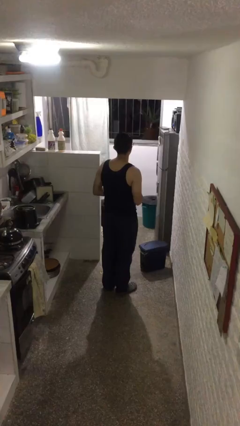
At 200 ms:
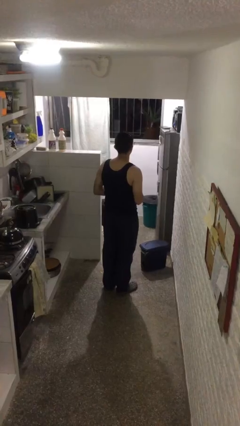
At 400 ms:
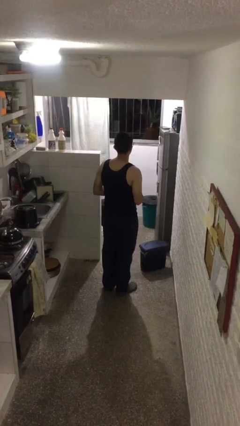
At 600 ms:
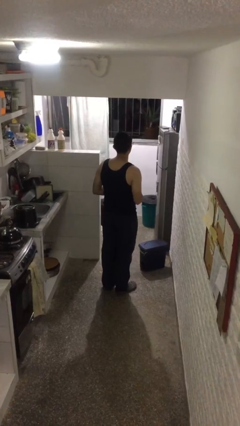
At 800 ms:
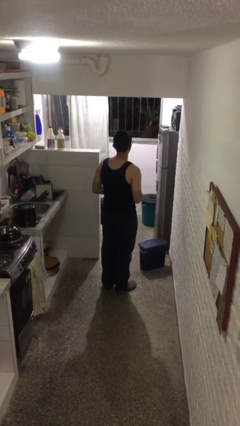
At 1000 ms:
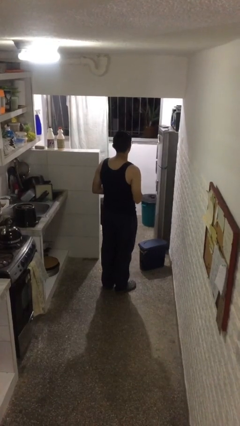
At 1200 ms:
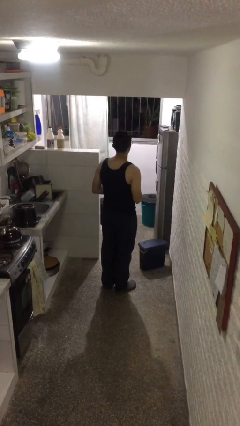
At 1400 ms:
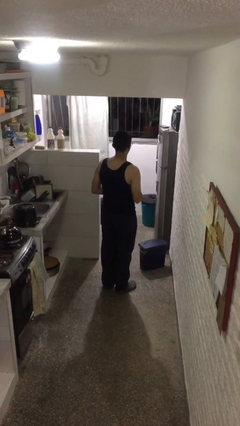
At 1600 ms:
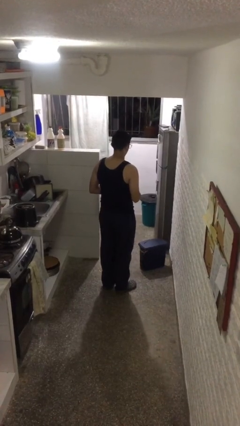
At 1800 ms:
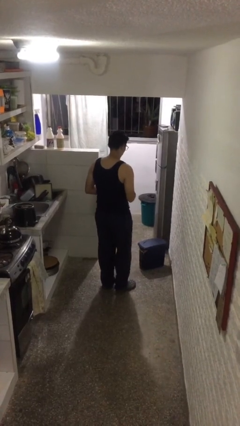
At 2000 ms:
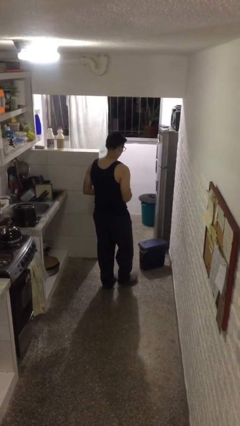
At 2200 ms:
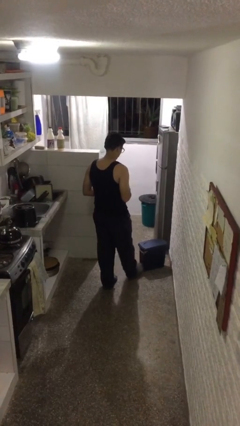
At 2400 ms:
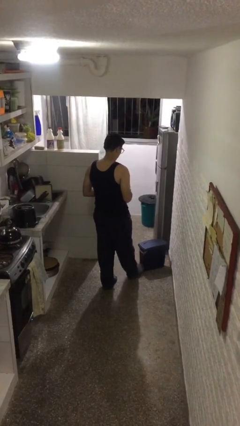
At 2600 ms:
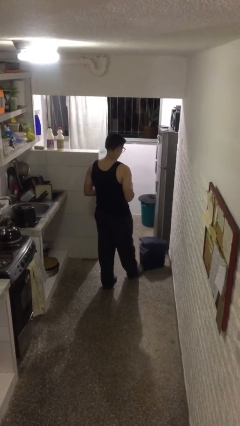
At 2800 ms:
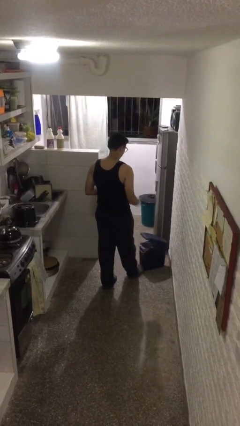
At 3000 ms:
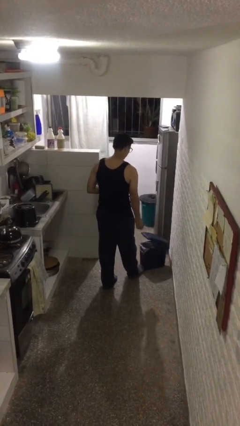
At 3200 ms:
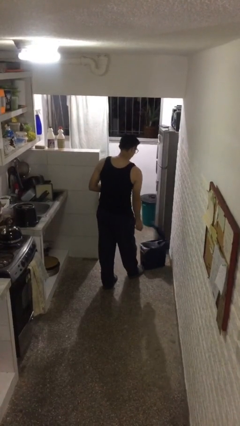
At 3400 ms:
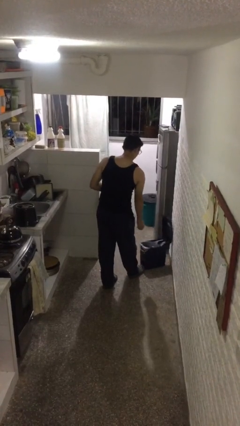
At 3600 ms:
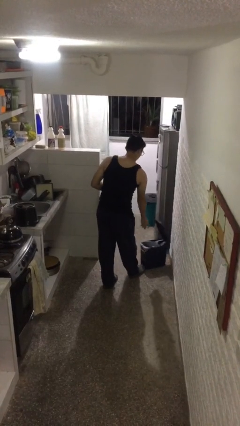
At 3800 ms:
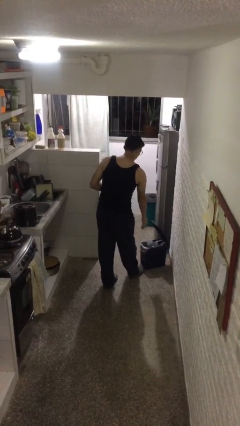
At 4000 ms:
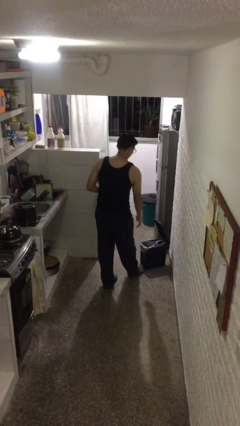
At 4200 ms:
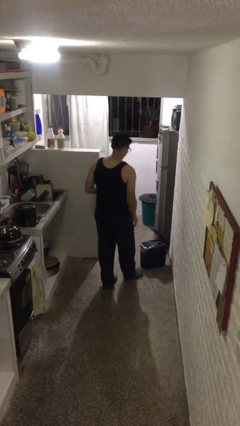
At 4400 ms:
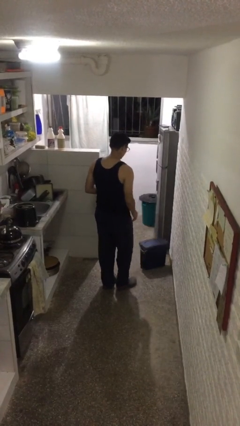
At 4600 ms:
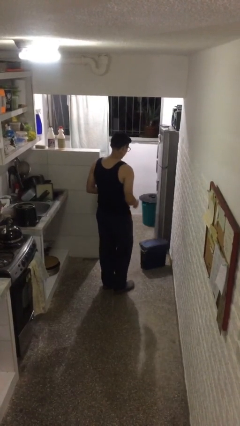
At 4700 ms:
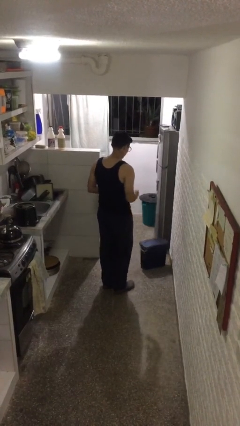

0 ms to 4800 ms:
person discards trash

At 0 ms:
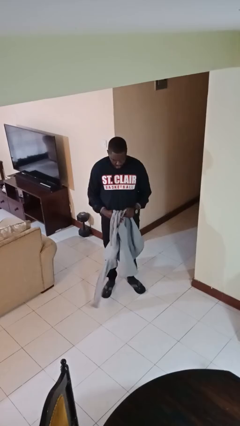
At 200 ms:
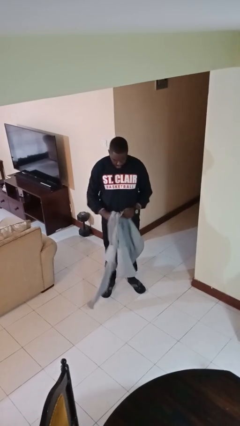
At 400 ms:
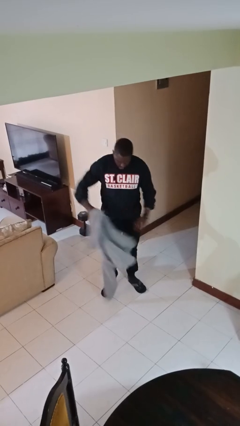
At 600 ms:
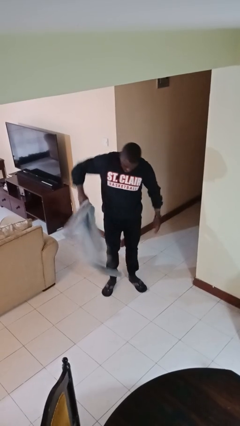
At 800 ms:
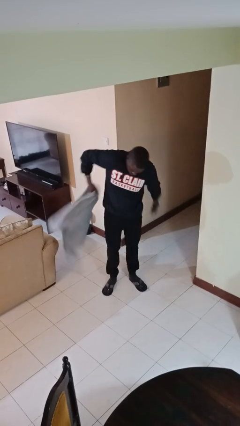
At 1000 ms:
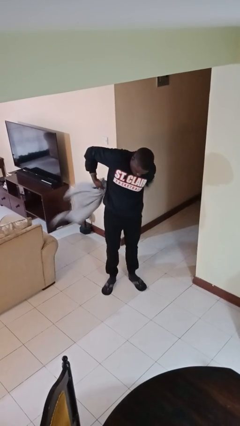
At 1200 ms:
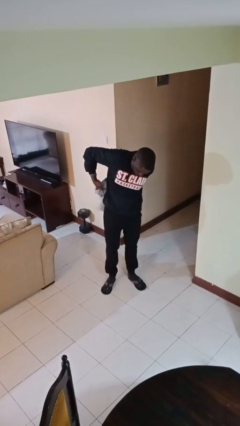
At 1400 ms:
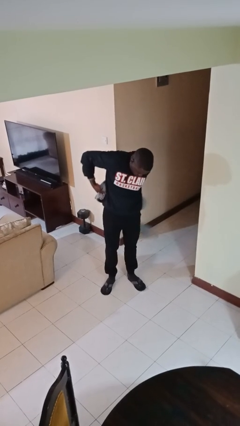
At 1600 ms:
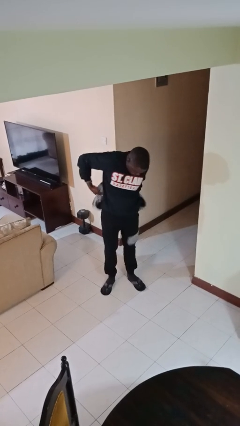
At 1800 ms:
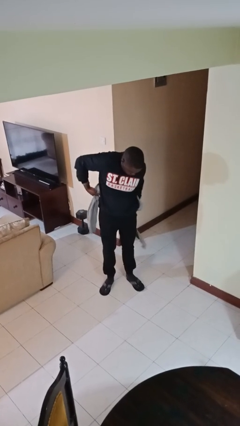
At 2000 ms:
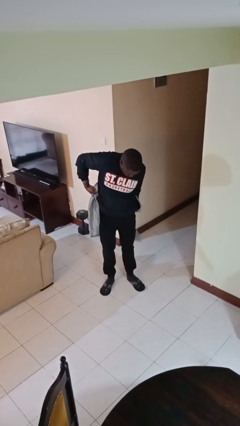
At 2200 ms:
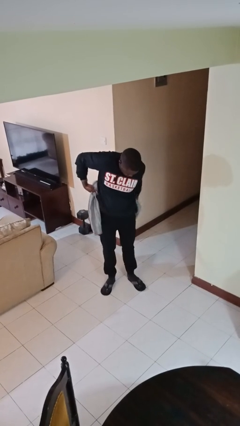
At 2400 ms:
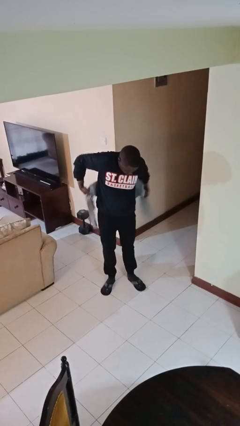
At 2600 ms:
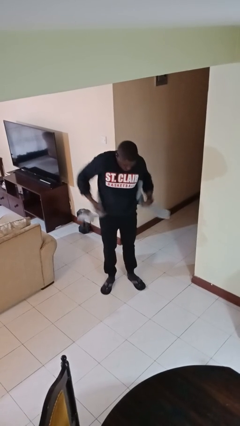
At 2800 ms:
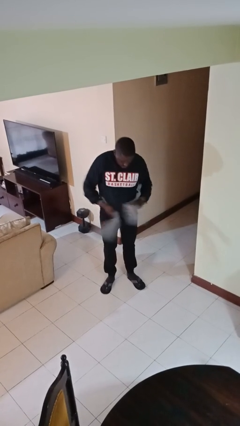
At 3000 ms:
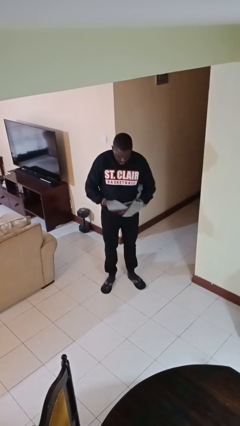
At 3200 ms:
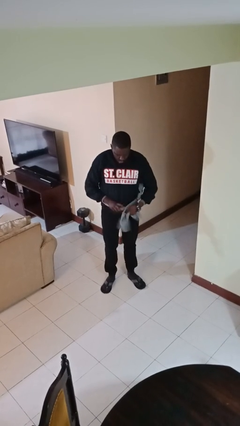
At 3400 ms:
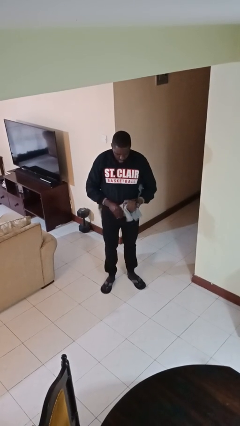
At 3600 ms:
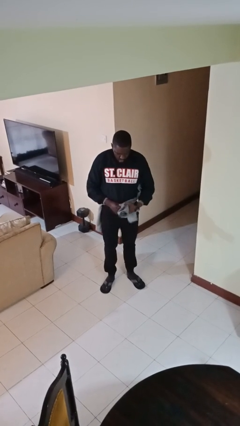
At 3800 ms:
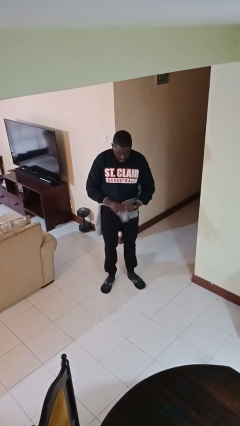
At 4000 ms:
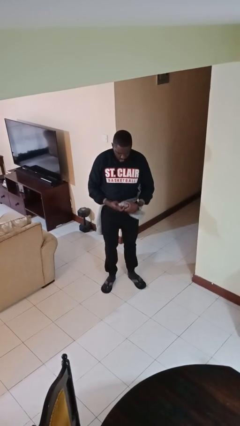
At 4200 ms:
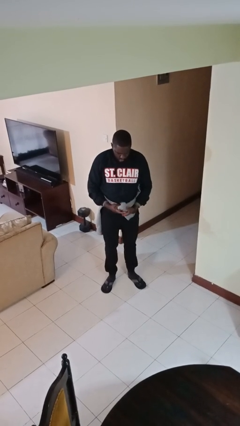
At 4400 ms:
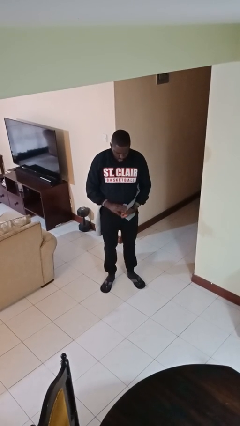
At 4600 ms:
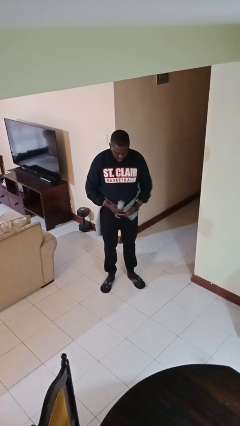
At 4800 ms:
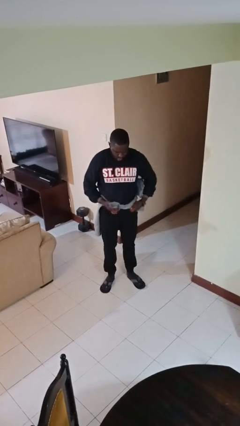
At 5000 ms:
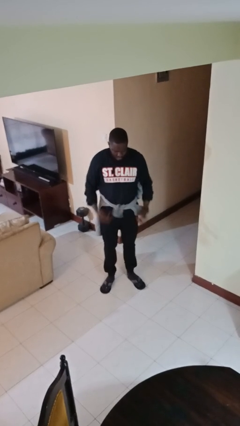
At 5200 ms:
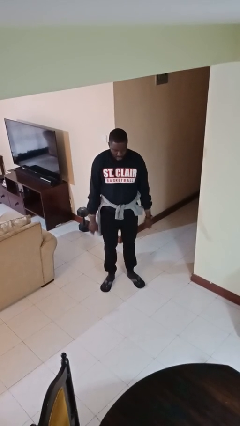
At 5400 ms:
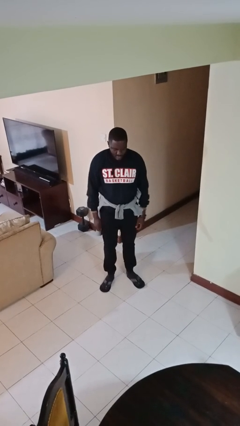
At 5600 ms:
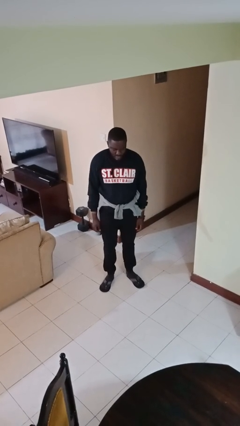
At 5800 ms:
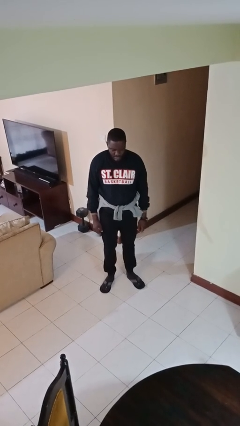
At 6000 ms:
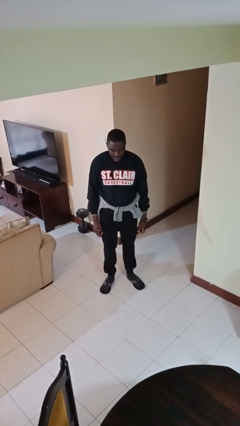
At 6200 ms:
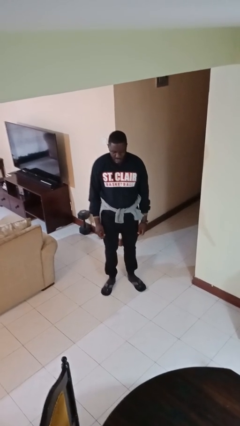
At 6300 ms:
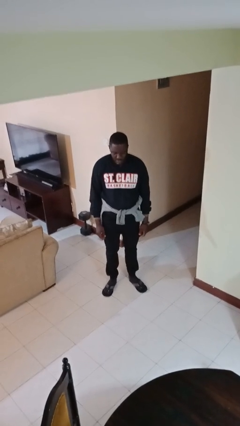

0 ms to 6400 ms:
person ties jacket around waist

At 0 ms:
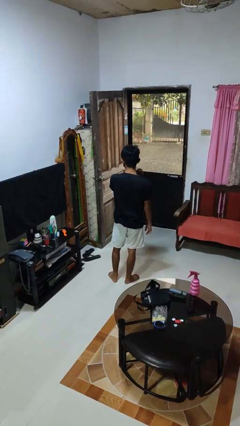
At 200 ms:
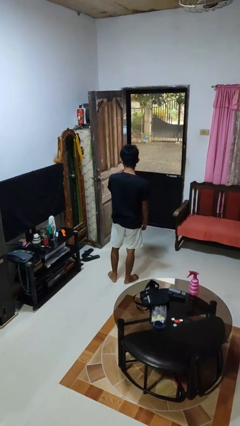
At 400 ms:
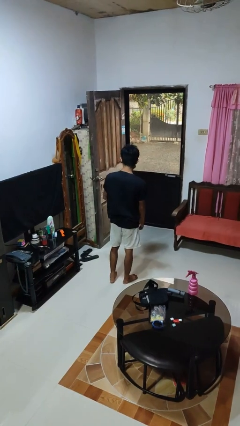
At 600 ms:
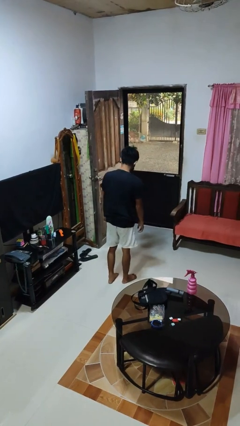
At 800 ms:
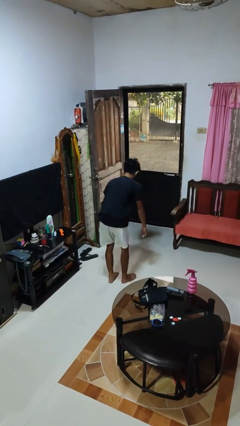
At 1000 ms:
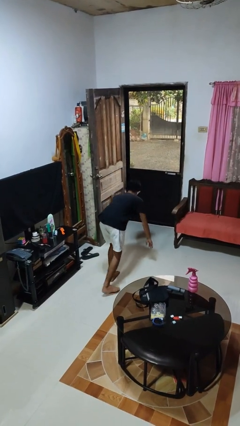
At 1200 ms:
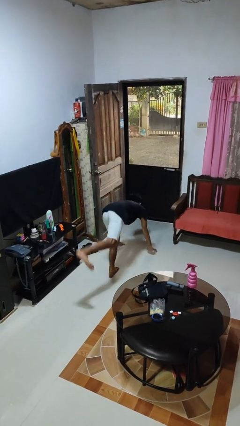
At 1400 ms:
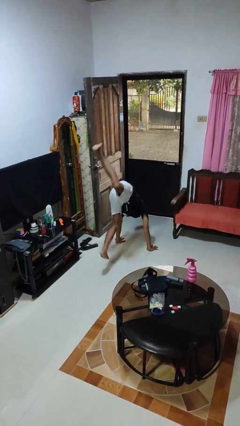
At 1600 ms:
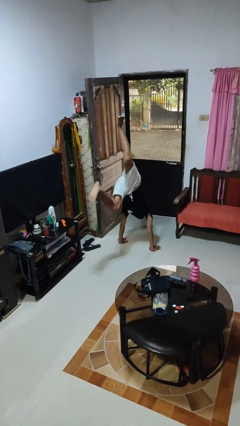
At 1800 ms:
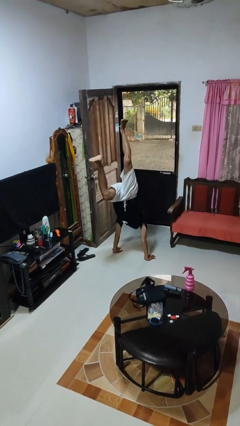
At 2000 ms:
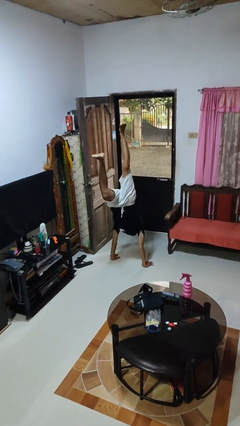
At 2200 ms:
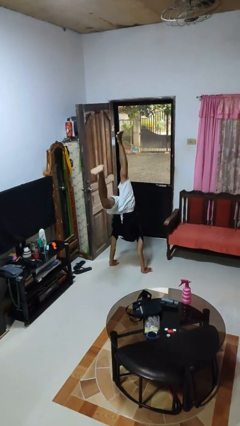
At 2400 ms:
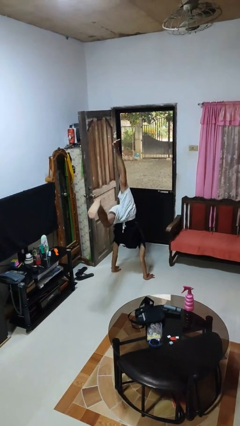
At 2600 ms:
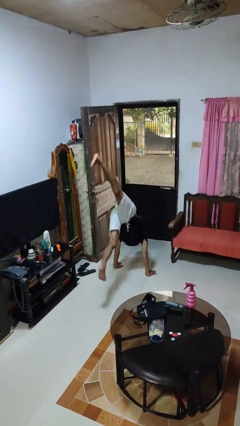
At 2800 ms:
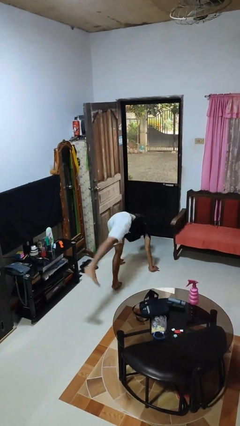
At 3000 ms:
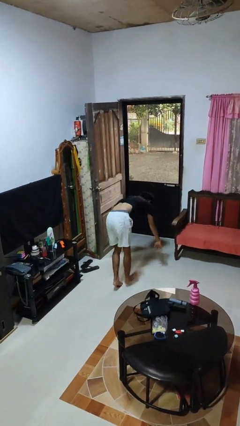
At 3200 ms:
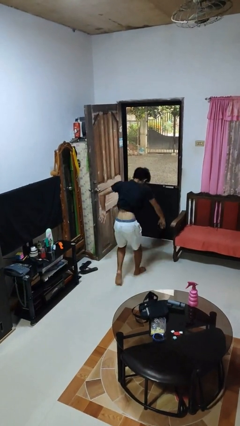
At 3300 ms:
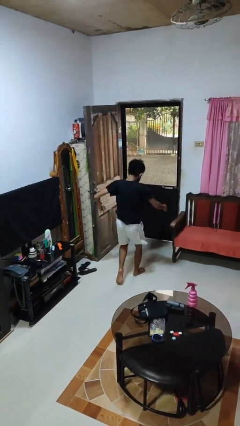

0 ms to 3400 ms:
person handstand

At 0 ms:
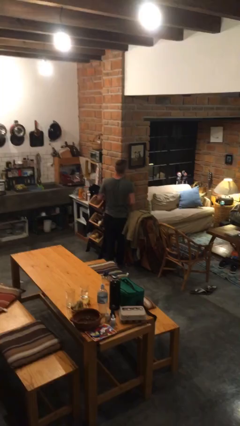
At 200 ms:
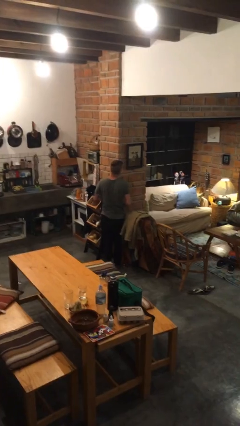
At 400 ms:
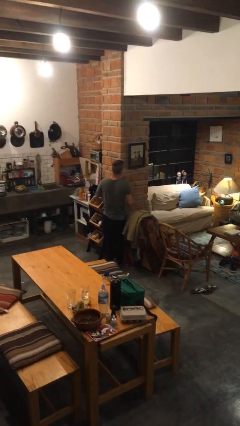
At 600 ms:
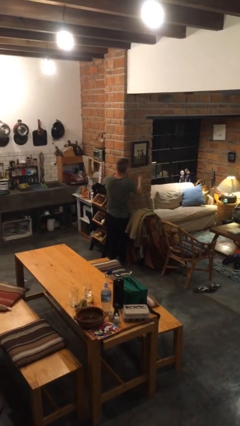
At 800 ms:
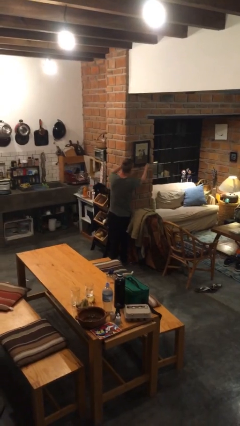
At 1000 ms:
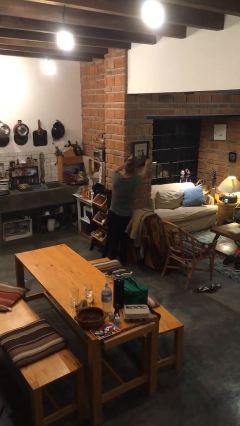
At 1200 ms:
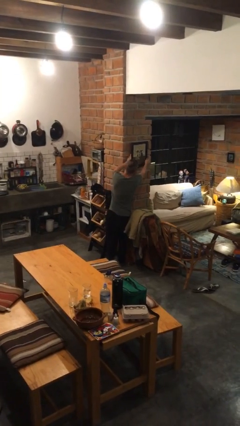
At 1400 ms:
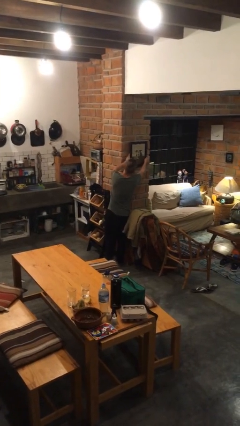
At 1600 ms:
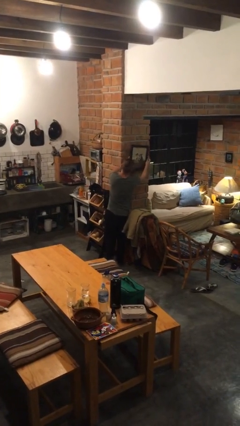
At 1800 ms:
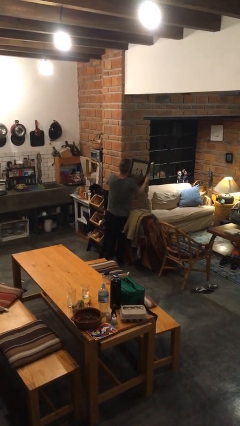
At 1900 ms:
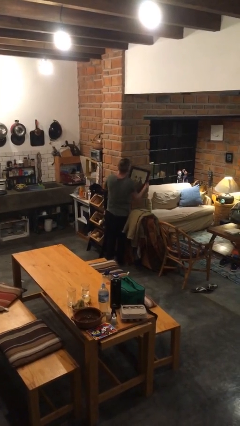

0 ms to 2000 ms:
person takes down picture frame

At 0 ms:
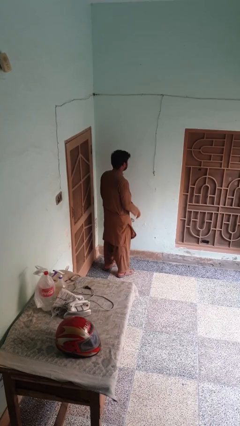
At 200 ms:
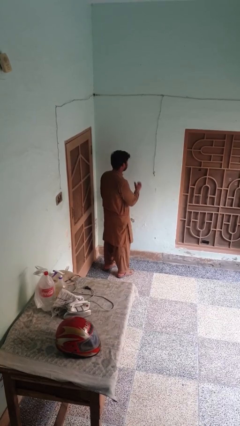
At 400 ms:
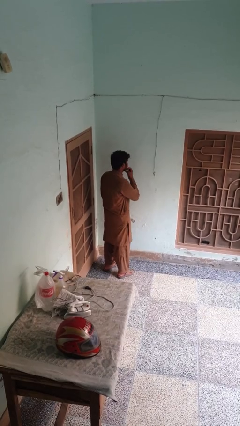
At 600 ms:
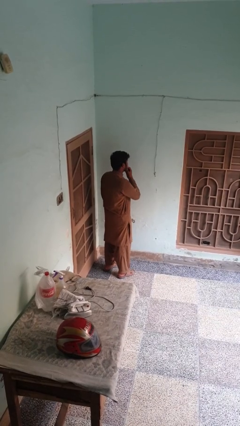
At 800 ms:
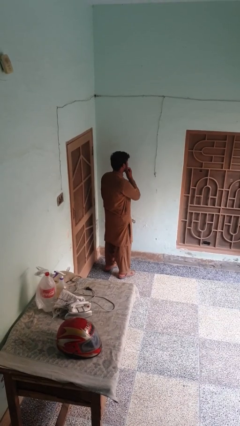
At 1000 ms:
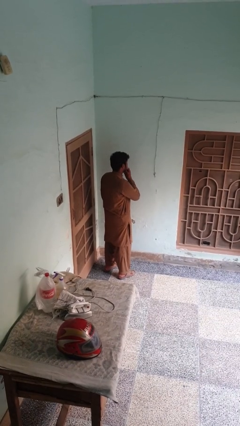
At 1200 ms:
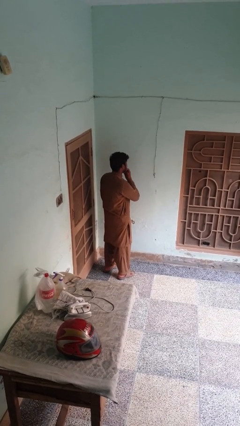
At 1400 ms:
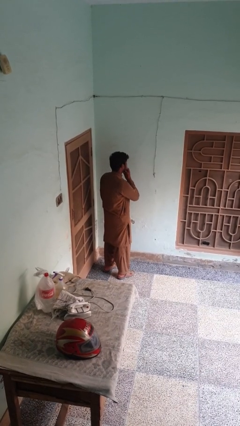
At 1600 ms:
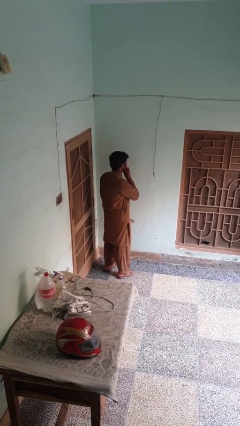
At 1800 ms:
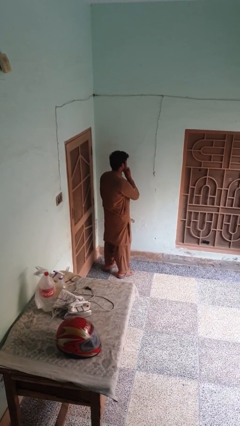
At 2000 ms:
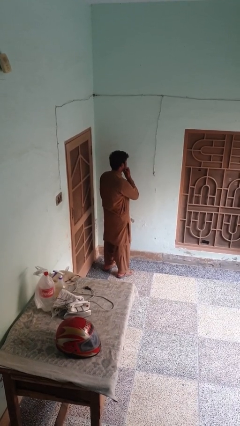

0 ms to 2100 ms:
person strokes chin
